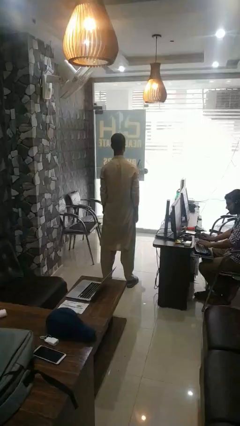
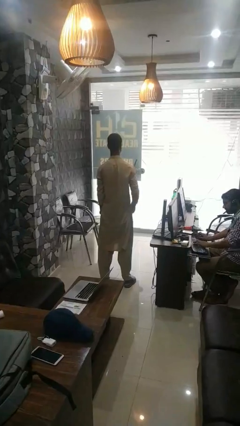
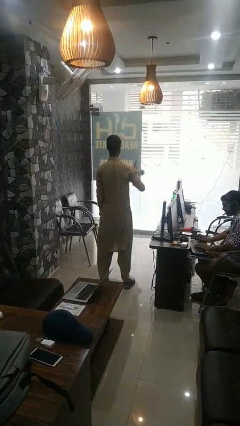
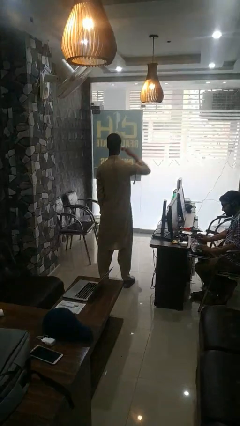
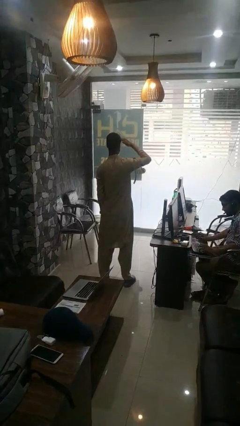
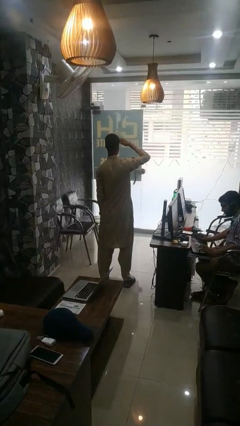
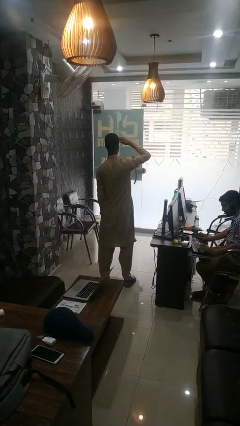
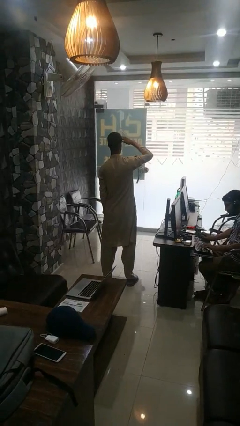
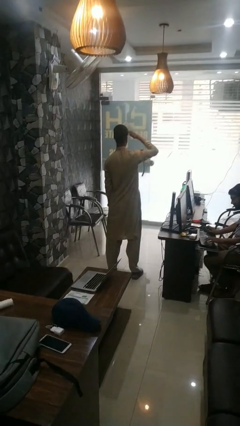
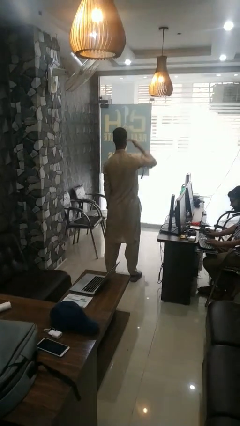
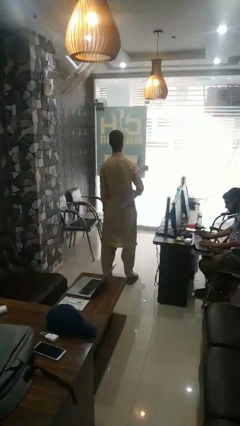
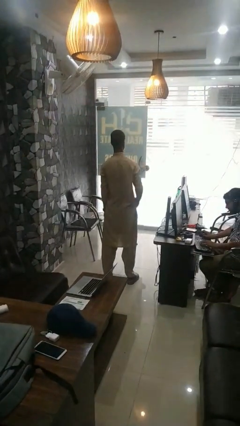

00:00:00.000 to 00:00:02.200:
person shades eyes

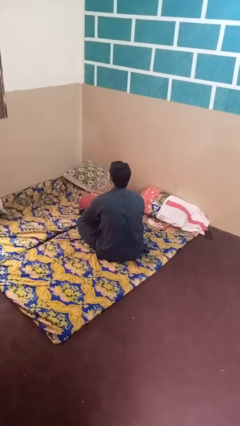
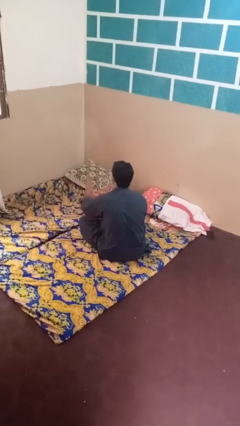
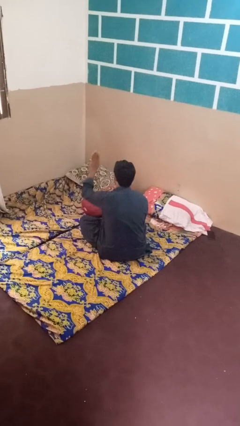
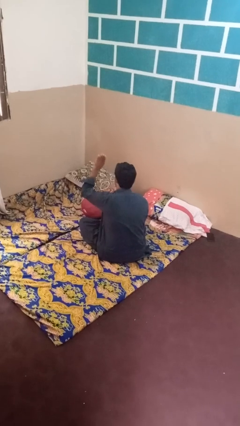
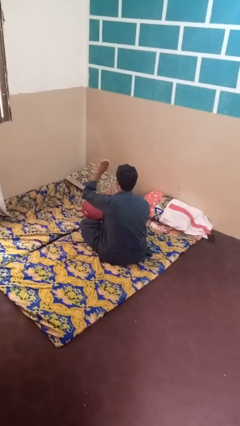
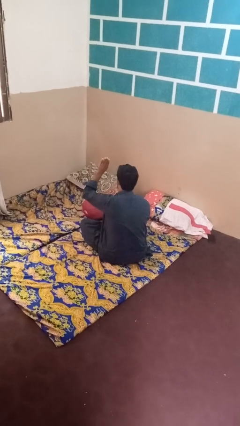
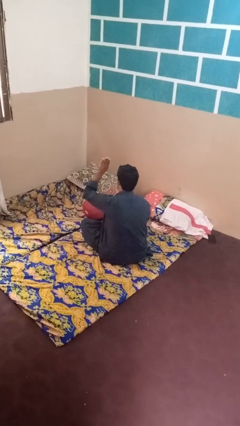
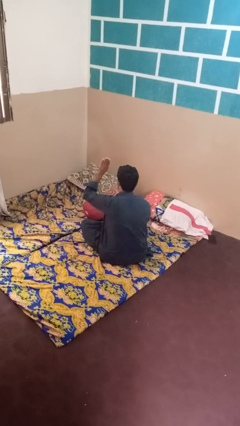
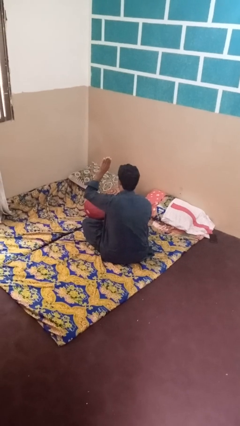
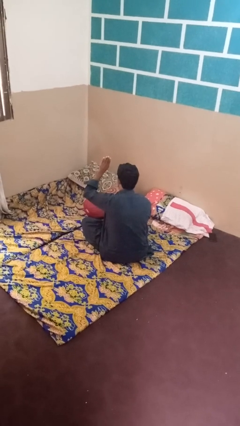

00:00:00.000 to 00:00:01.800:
person gestures number four

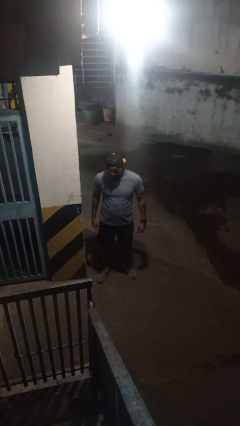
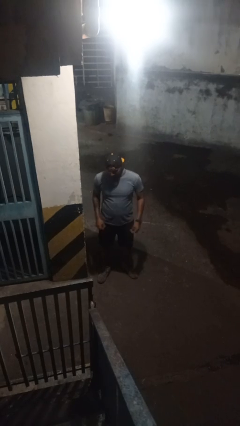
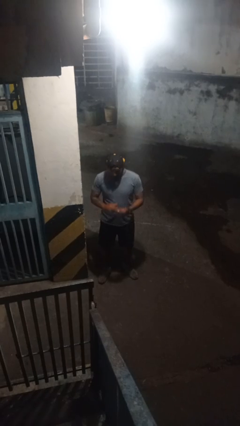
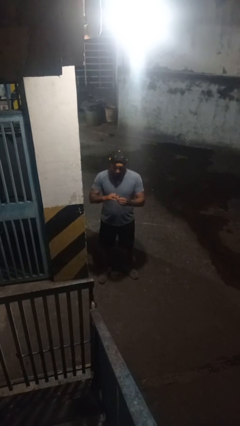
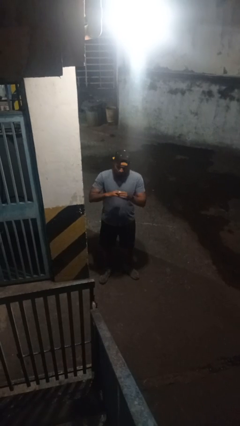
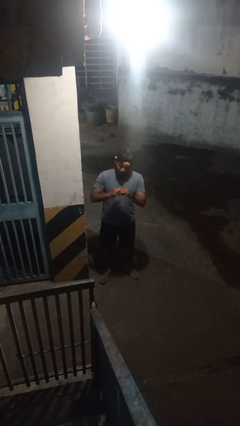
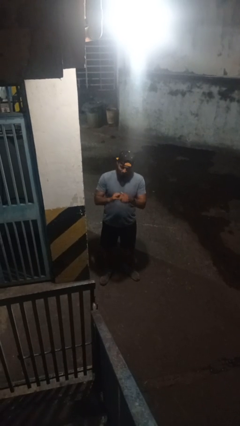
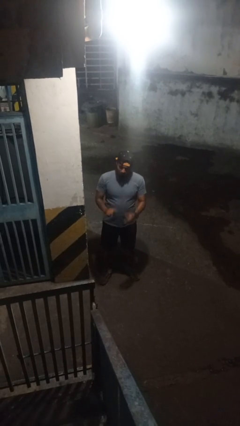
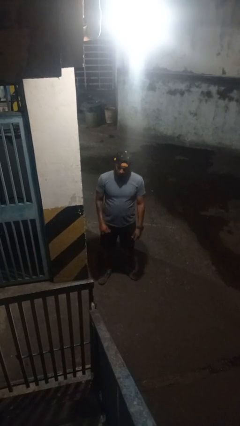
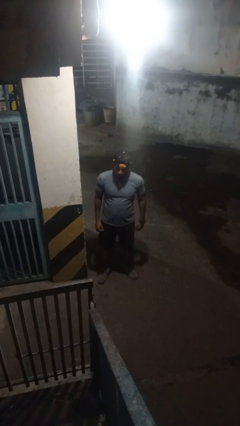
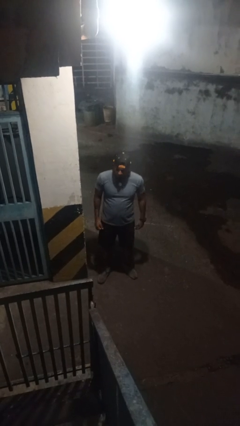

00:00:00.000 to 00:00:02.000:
person puts on ring

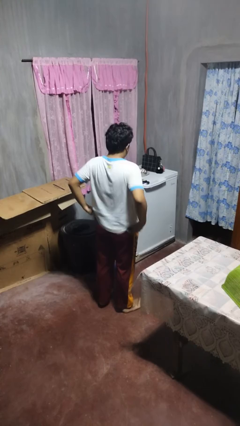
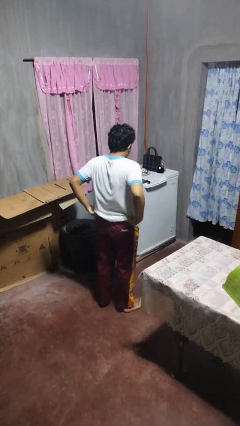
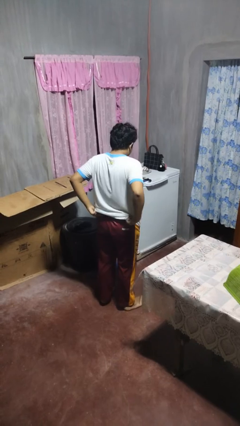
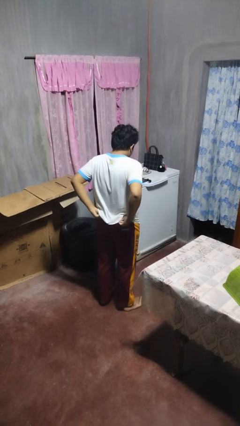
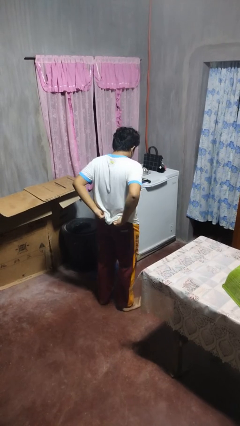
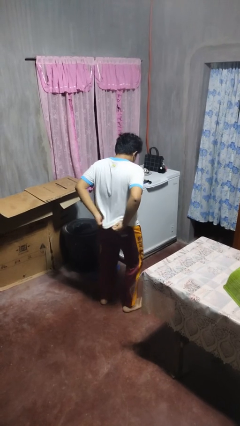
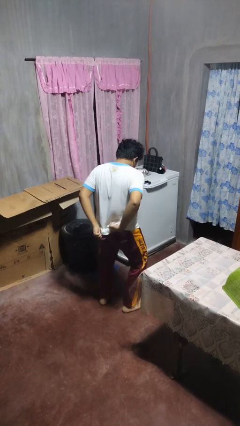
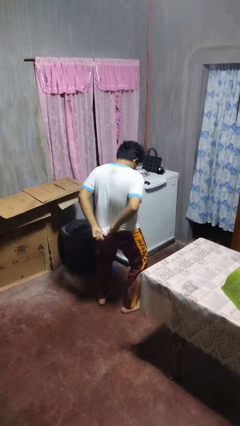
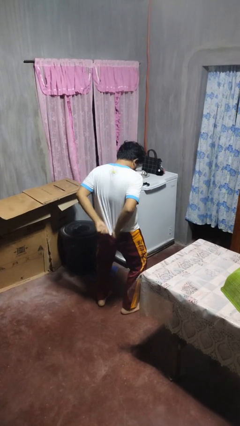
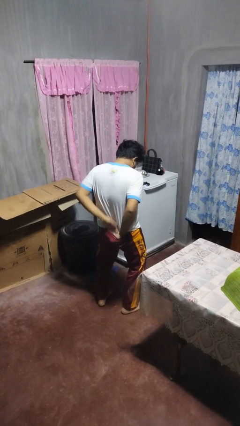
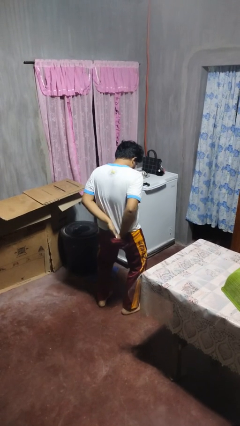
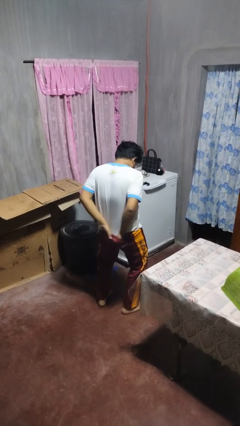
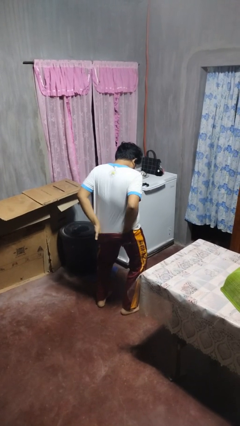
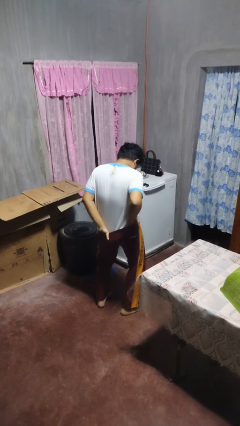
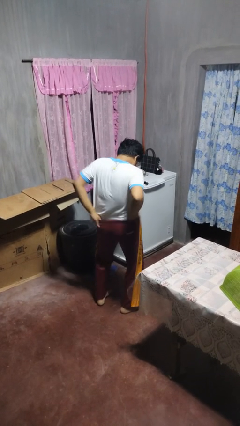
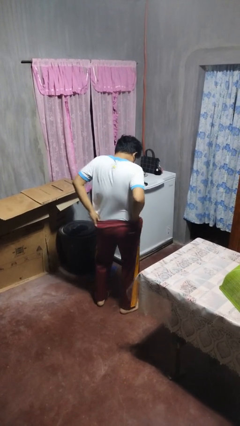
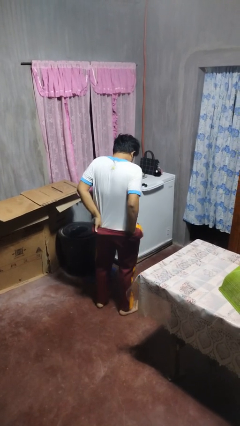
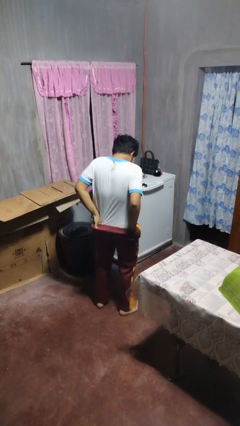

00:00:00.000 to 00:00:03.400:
person tucks in shirt

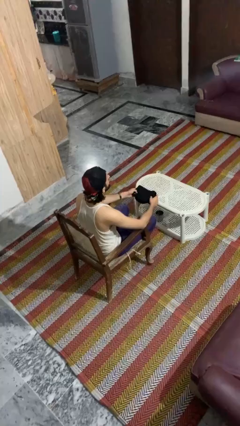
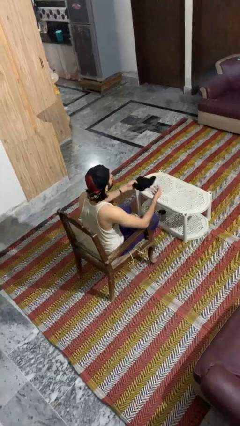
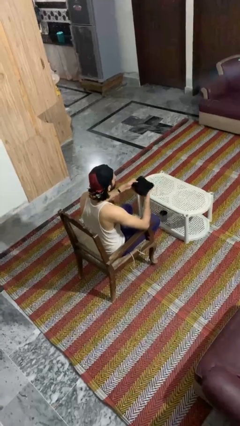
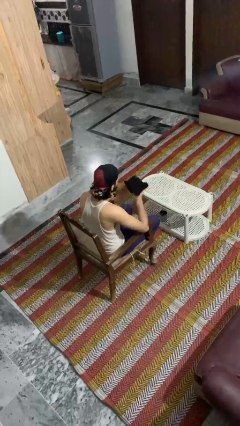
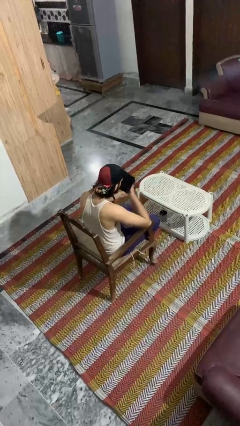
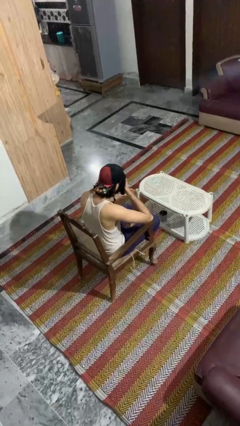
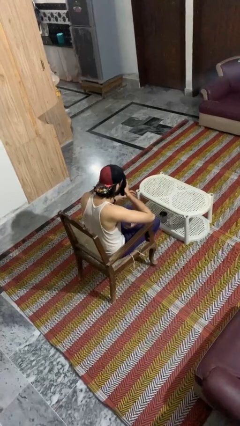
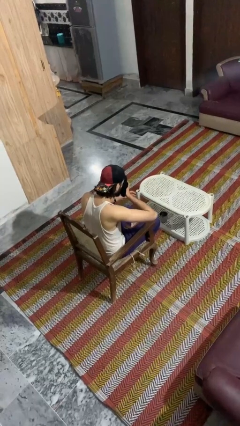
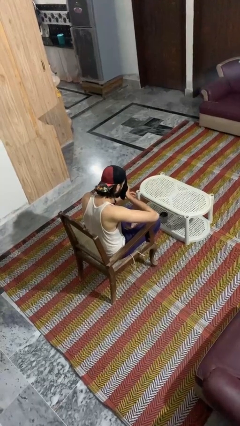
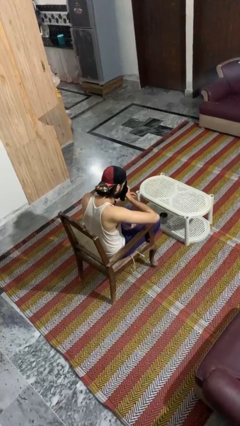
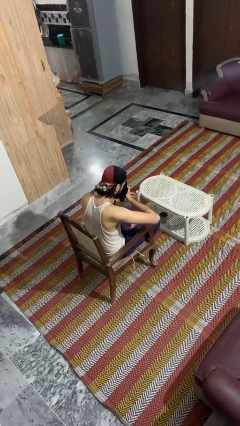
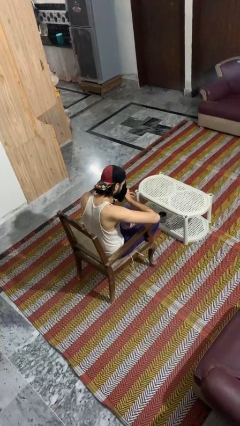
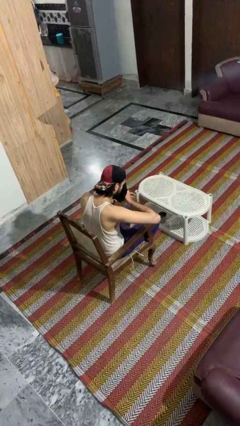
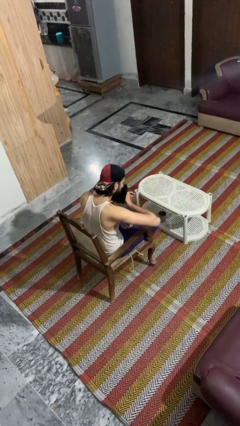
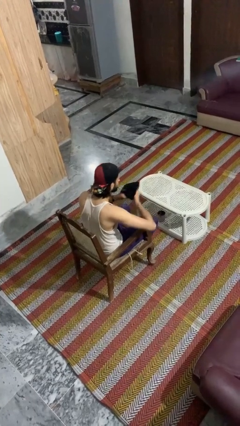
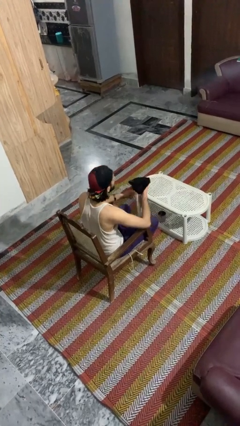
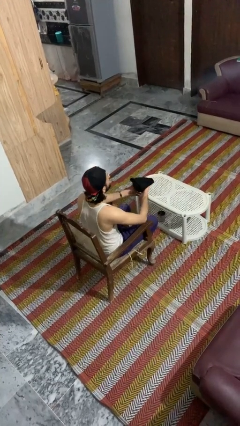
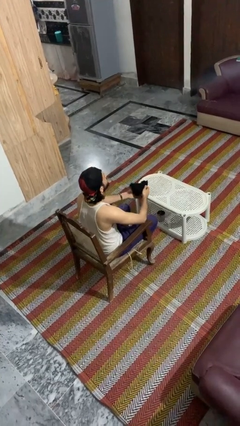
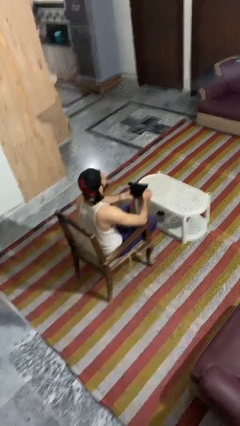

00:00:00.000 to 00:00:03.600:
person blows nose

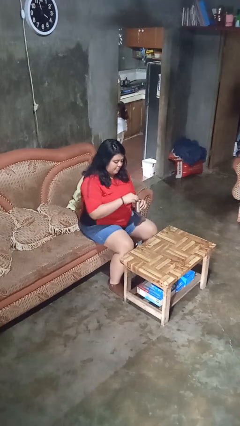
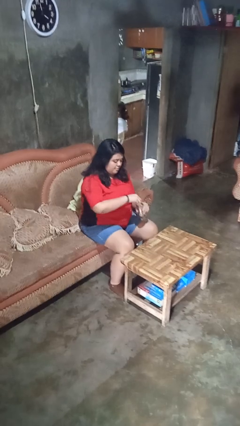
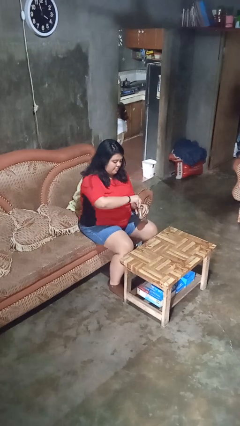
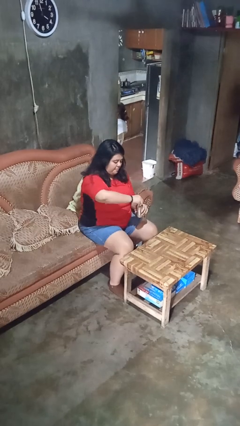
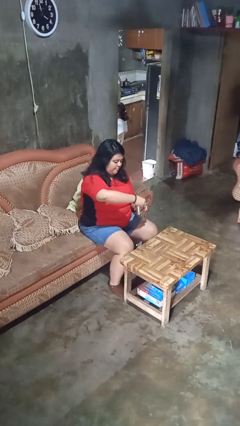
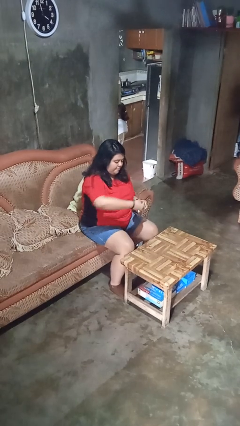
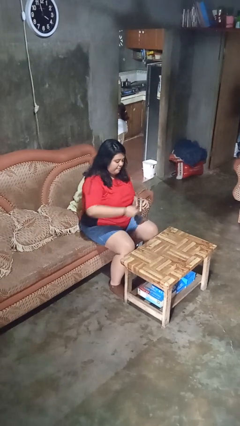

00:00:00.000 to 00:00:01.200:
person opens beverage can

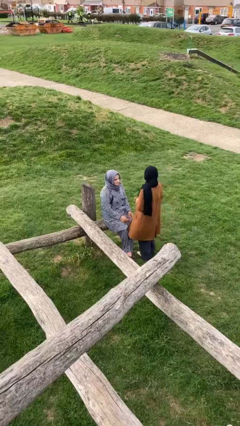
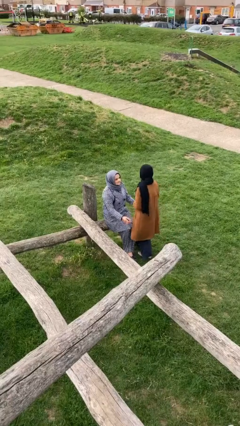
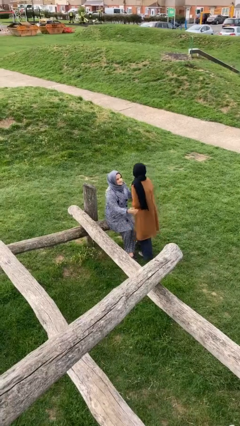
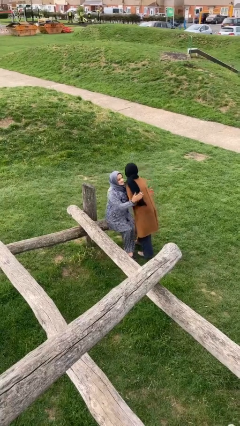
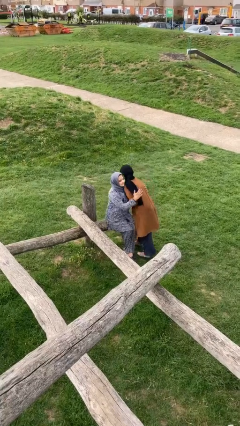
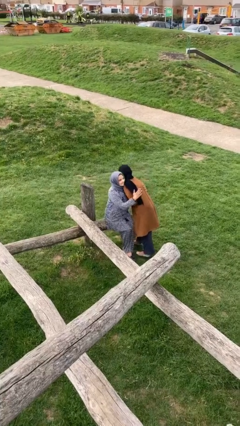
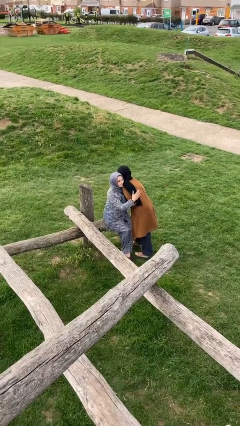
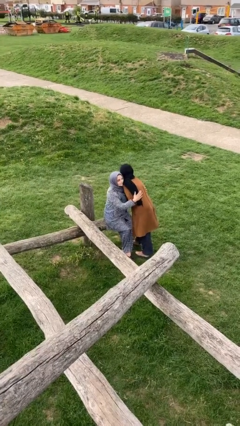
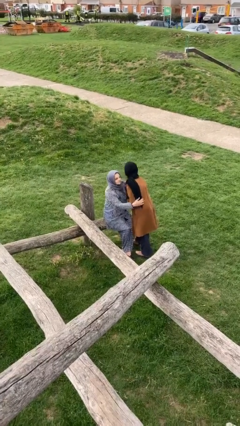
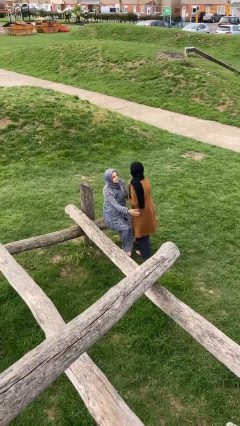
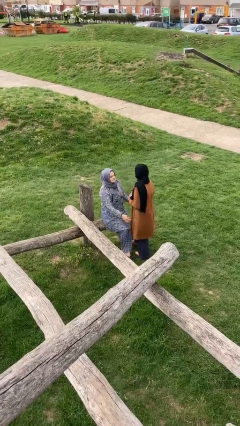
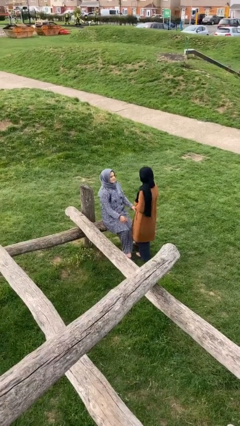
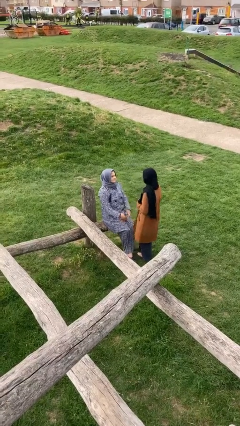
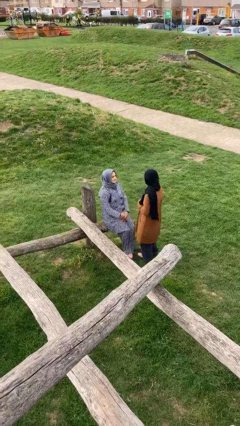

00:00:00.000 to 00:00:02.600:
person embraces person

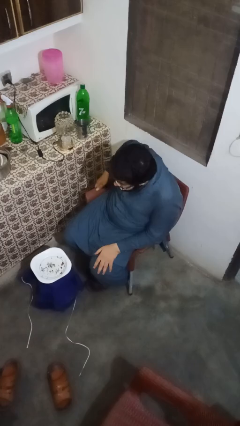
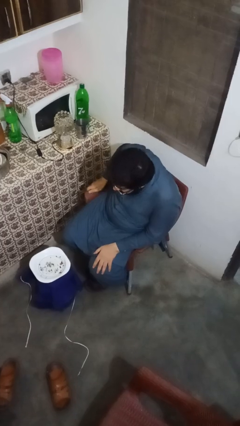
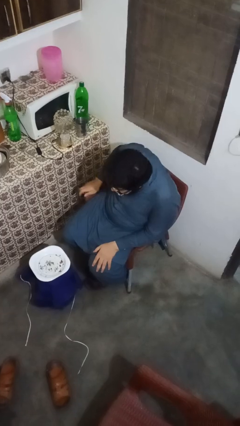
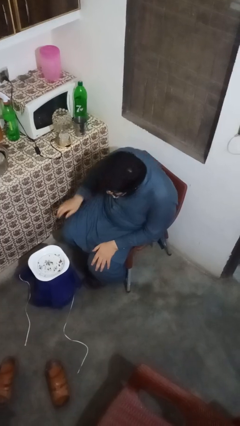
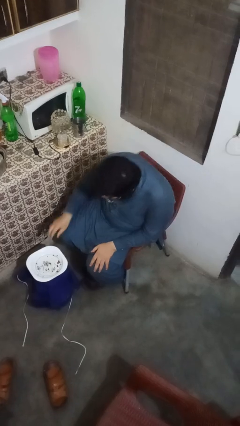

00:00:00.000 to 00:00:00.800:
person eats with hands
